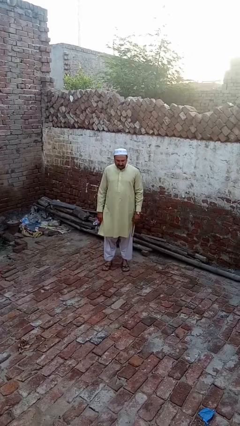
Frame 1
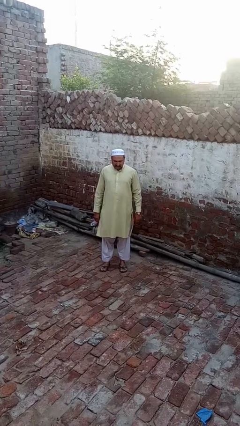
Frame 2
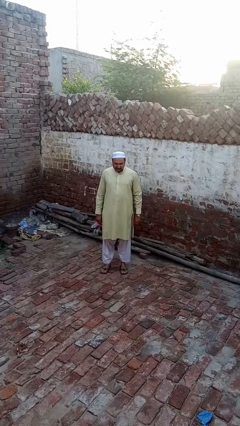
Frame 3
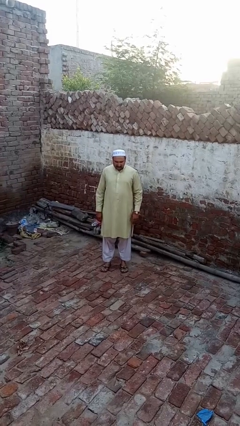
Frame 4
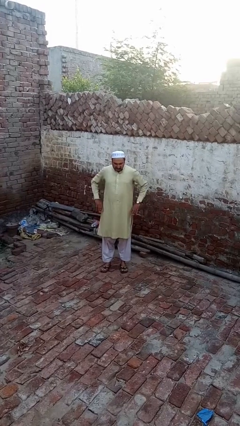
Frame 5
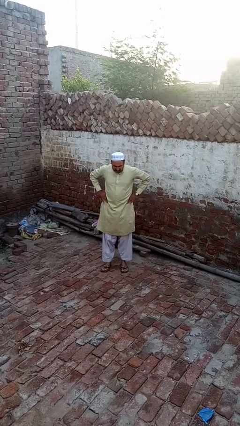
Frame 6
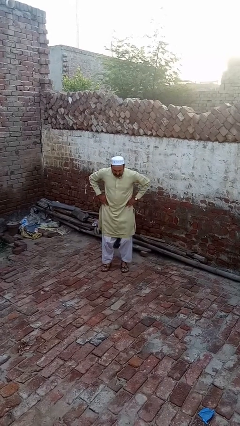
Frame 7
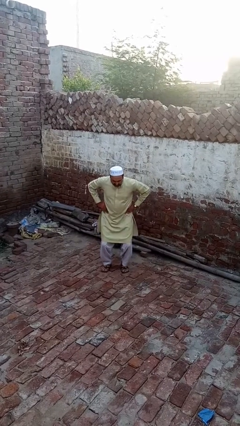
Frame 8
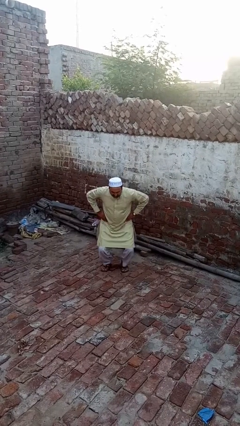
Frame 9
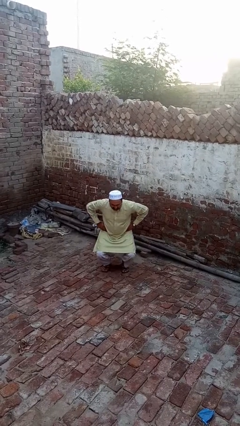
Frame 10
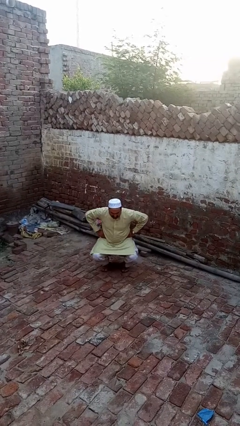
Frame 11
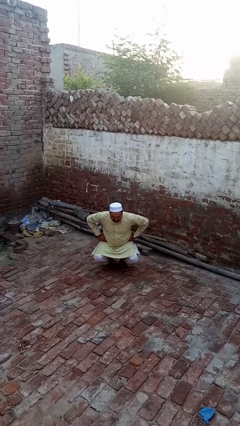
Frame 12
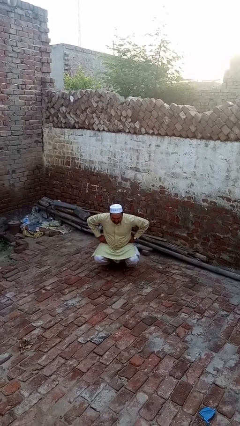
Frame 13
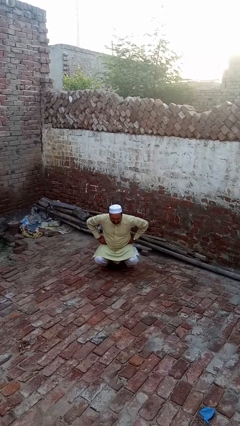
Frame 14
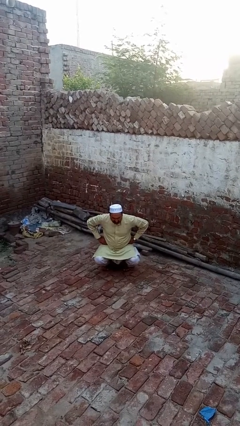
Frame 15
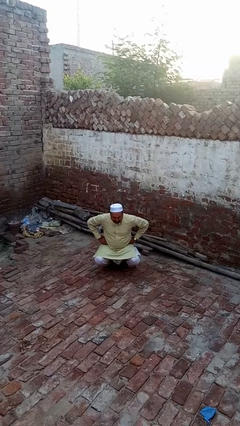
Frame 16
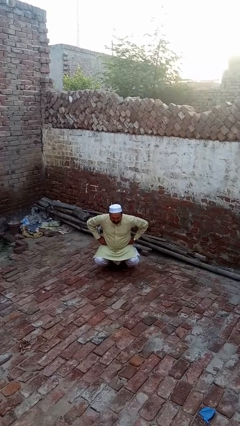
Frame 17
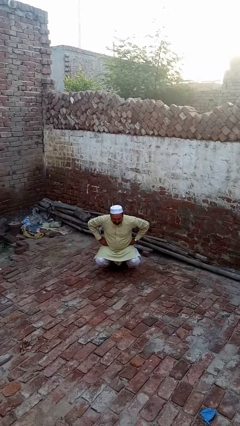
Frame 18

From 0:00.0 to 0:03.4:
person squats

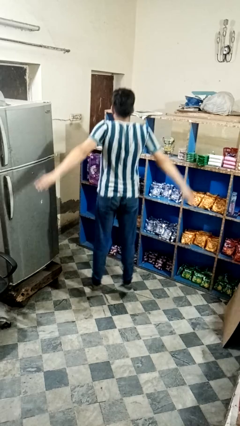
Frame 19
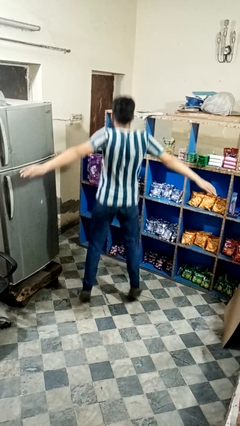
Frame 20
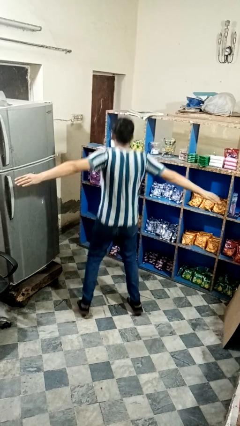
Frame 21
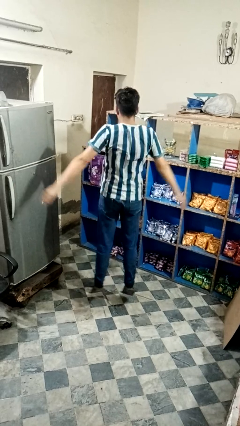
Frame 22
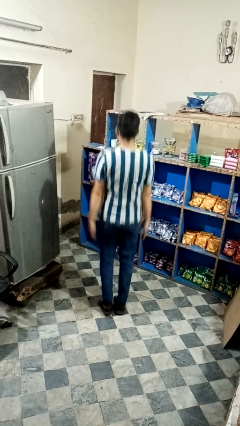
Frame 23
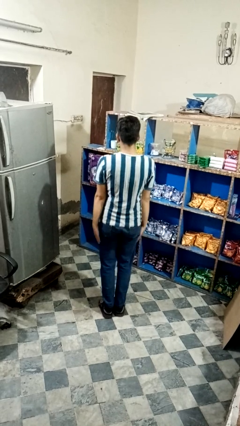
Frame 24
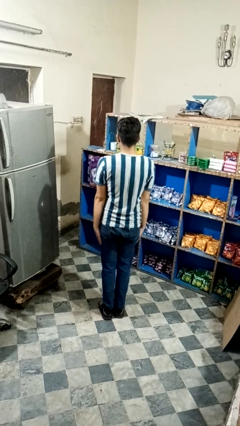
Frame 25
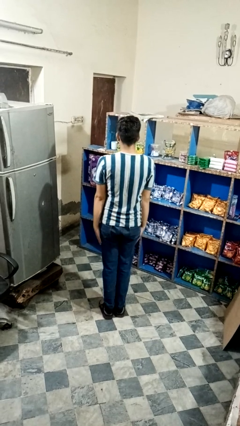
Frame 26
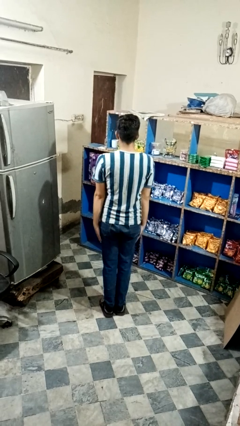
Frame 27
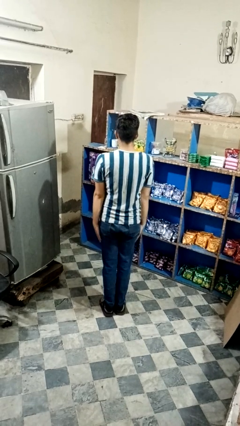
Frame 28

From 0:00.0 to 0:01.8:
person exercises with jumping jacks

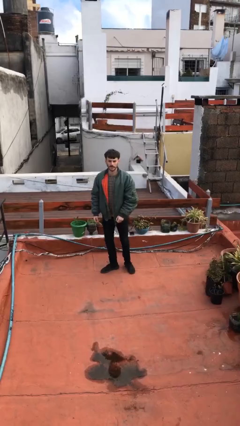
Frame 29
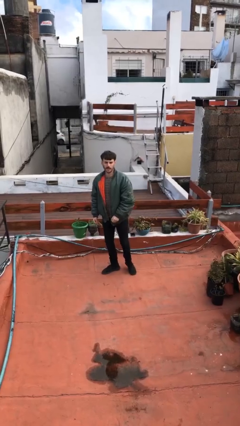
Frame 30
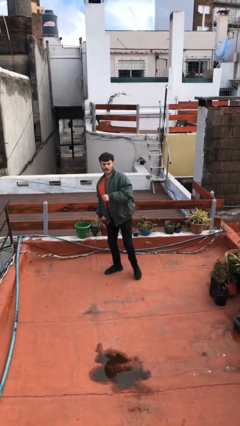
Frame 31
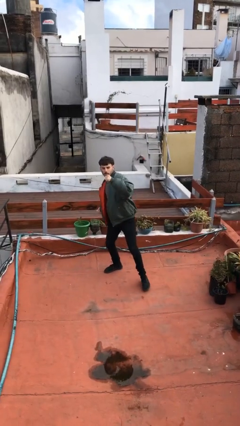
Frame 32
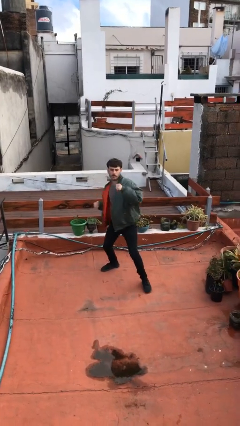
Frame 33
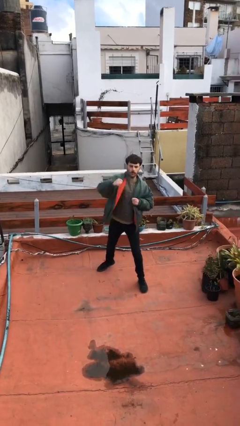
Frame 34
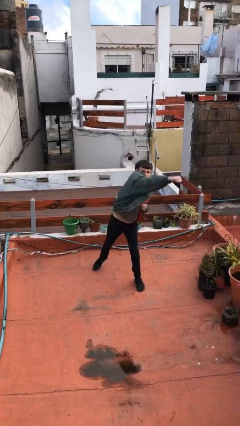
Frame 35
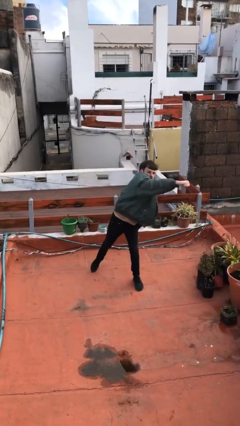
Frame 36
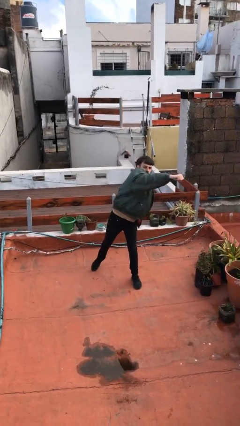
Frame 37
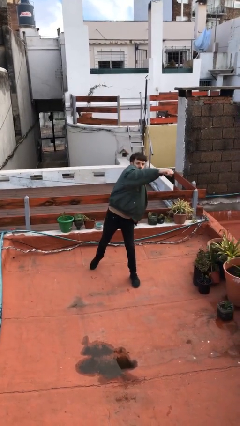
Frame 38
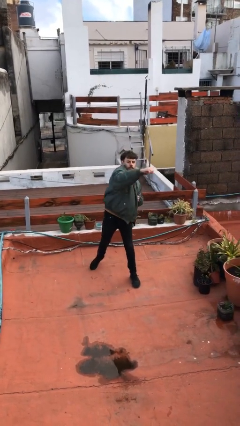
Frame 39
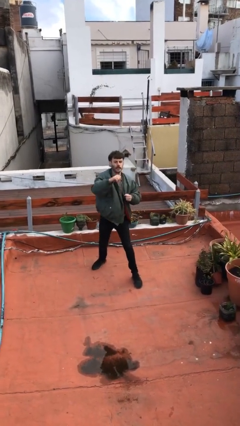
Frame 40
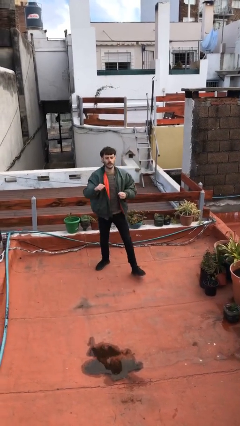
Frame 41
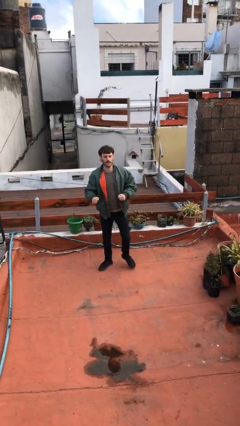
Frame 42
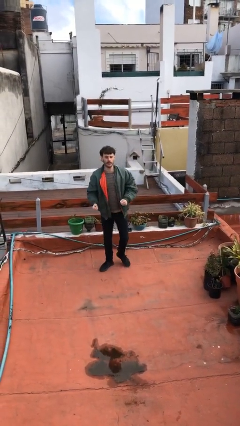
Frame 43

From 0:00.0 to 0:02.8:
person punches

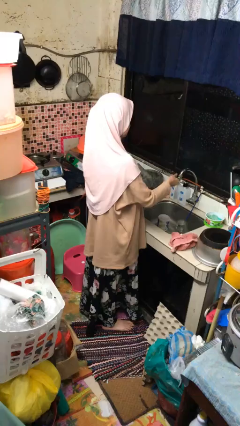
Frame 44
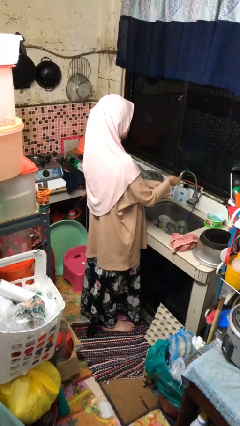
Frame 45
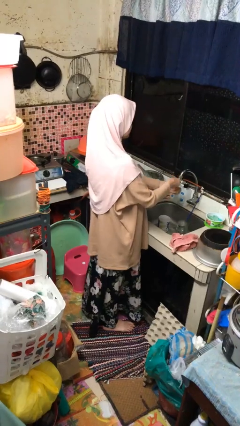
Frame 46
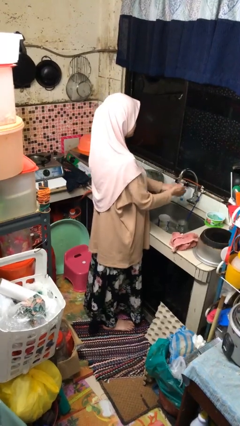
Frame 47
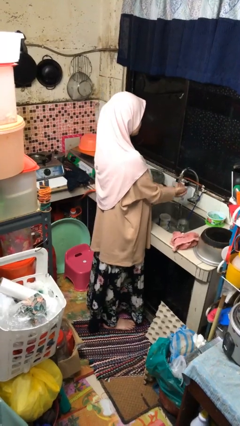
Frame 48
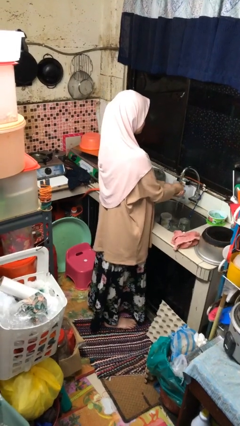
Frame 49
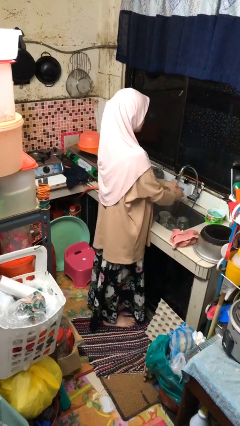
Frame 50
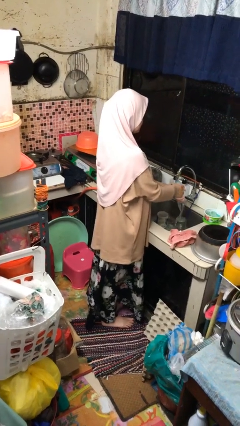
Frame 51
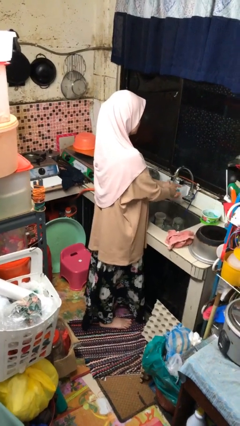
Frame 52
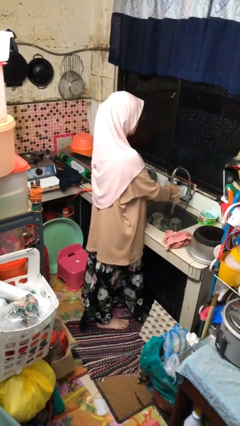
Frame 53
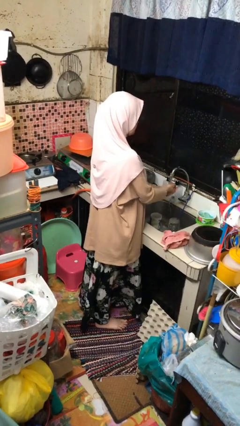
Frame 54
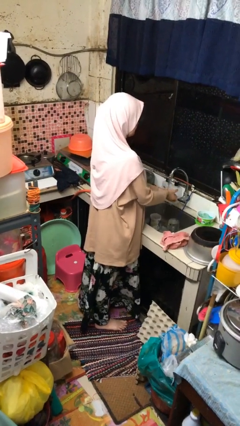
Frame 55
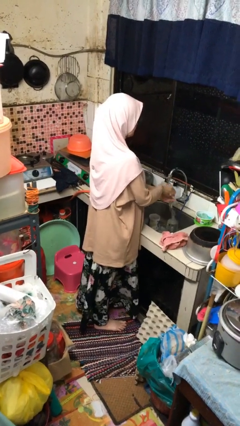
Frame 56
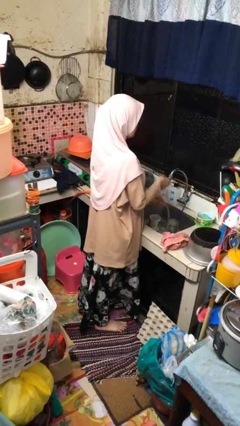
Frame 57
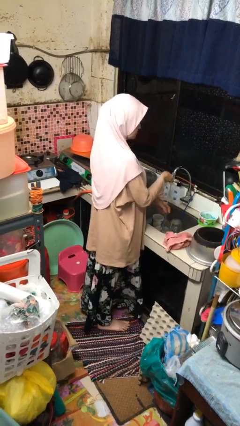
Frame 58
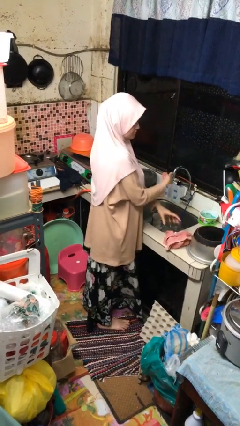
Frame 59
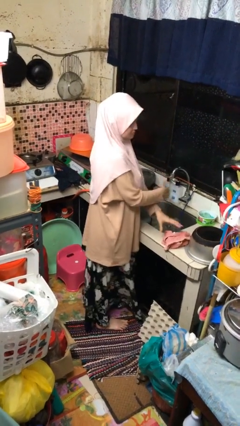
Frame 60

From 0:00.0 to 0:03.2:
person washes hands

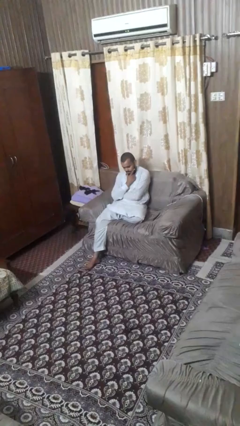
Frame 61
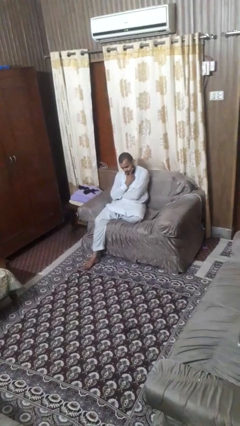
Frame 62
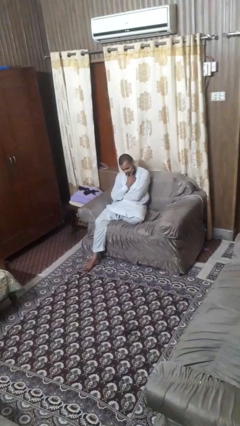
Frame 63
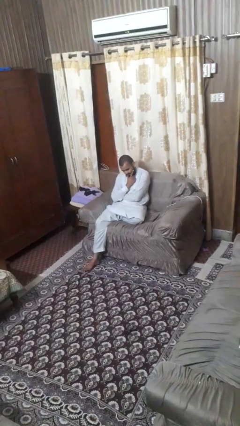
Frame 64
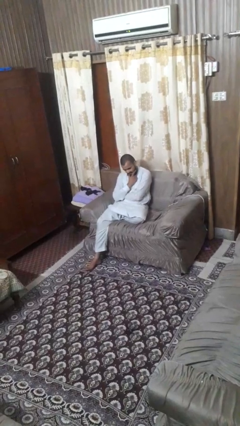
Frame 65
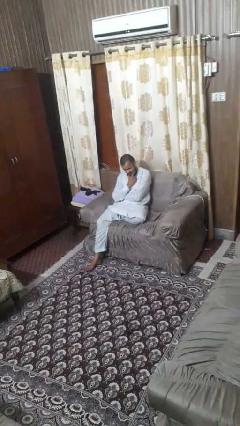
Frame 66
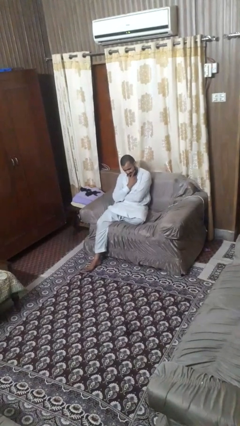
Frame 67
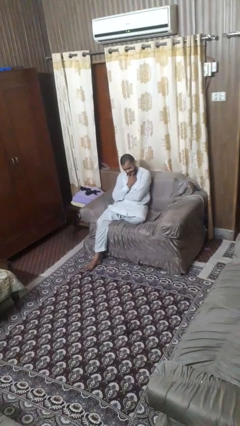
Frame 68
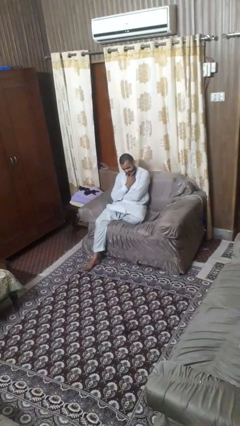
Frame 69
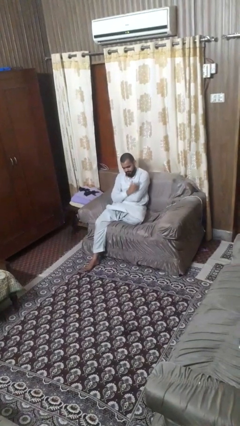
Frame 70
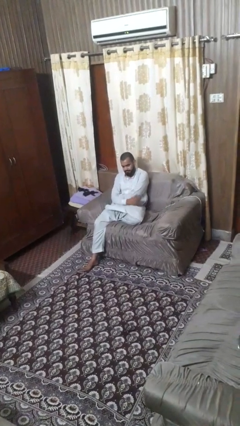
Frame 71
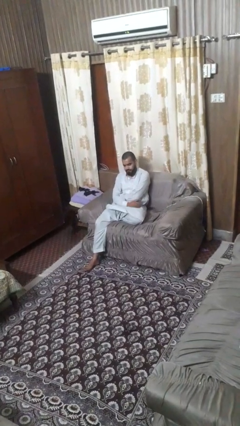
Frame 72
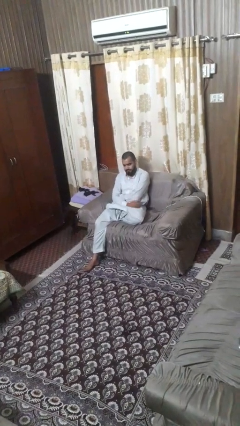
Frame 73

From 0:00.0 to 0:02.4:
person strokes chin

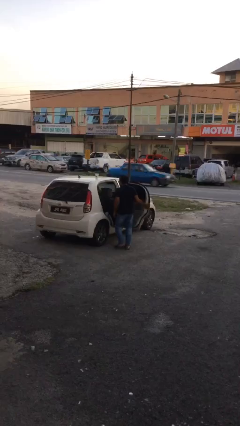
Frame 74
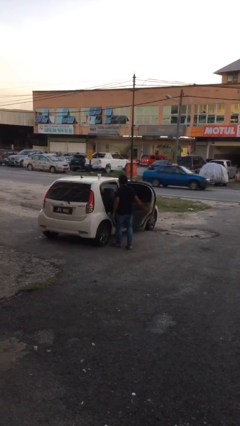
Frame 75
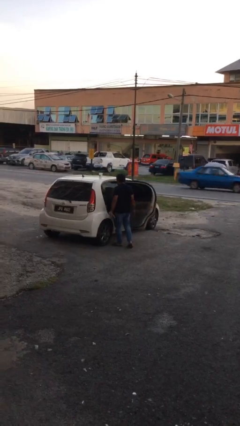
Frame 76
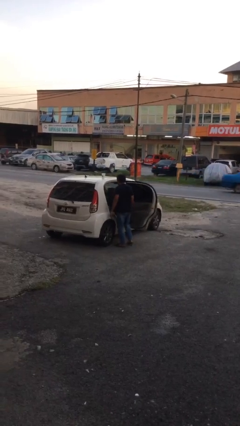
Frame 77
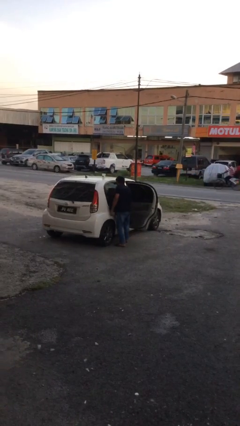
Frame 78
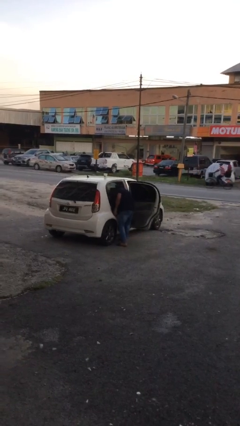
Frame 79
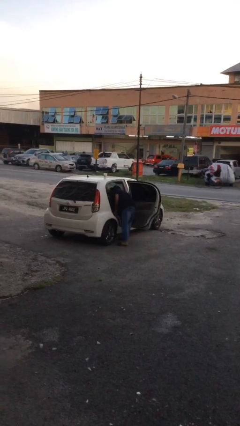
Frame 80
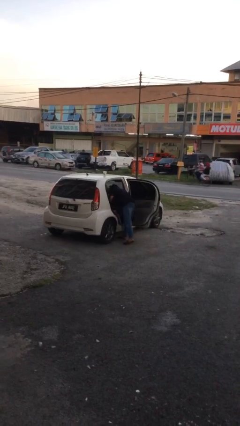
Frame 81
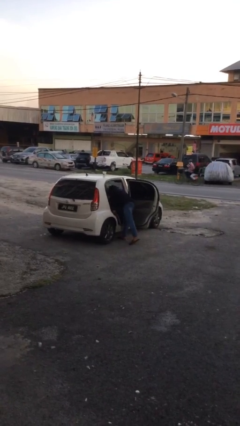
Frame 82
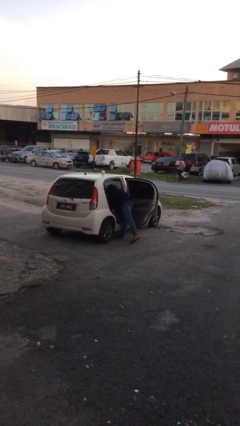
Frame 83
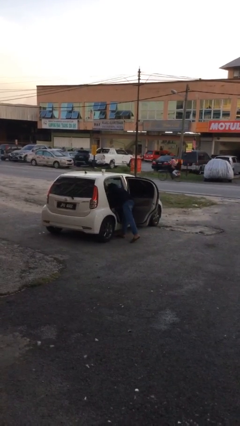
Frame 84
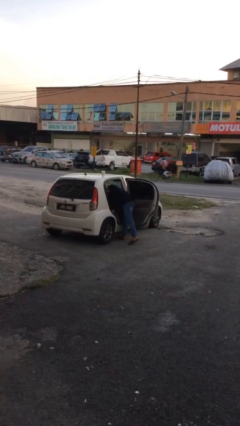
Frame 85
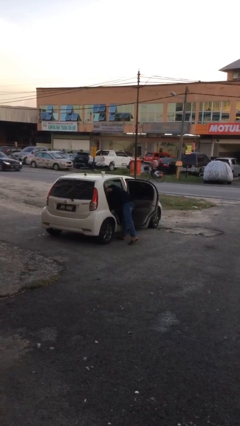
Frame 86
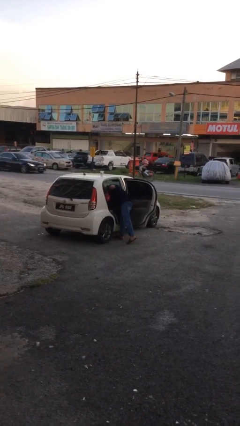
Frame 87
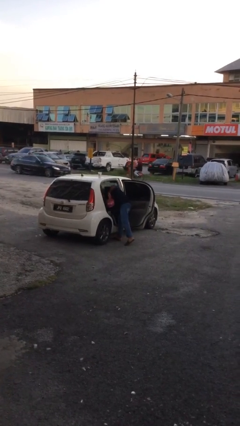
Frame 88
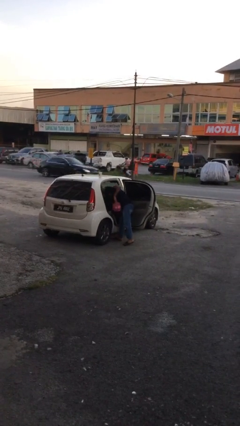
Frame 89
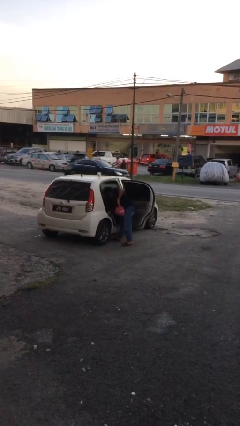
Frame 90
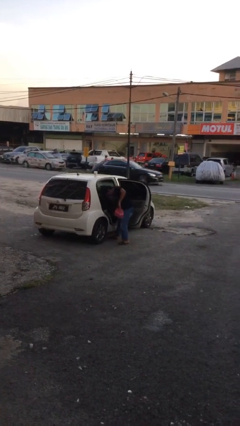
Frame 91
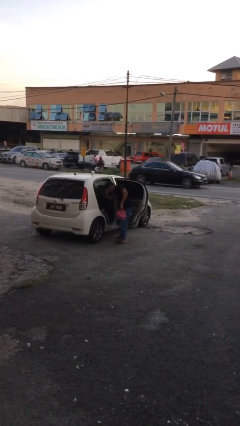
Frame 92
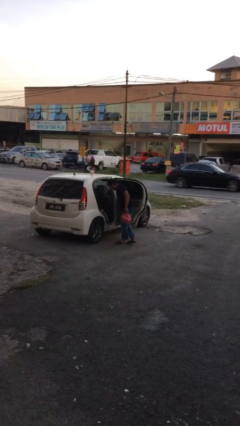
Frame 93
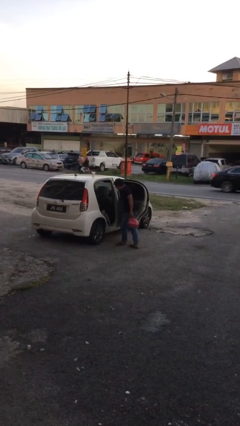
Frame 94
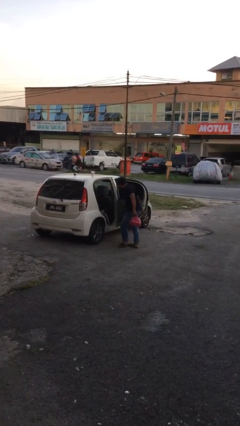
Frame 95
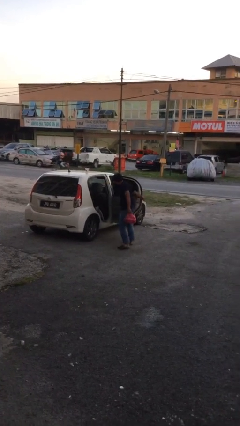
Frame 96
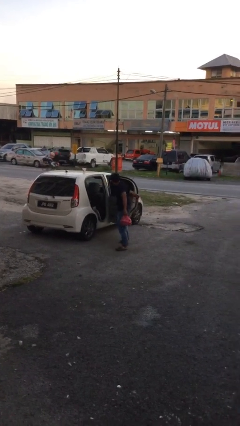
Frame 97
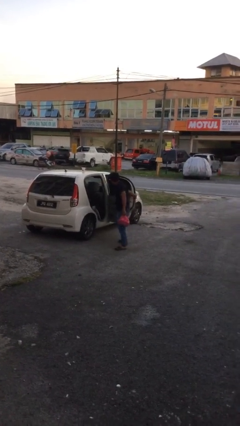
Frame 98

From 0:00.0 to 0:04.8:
person unloads car
